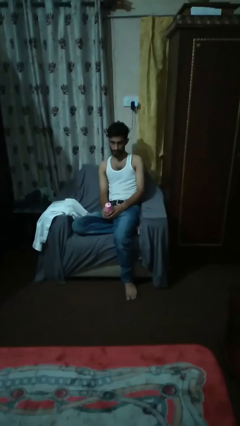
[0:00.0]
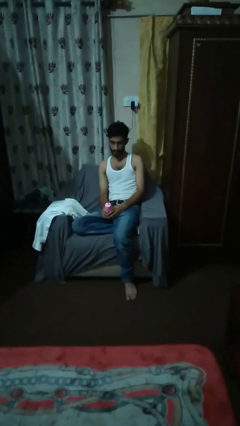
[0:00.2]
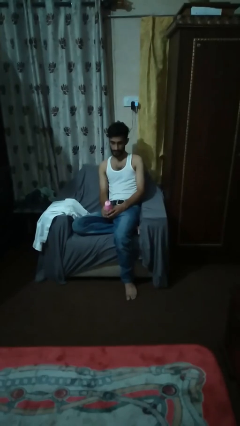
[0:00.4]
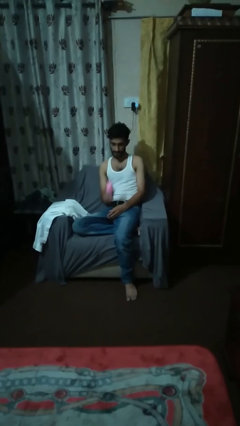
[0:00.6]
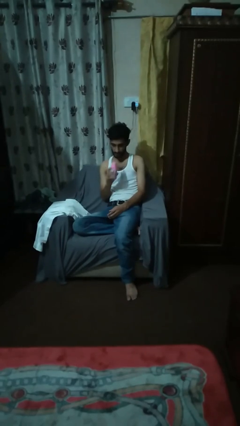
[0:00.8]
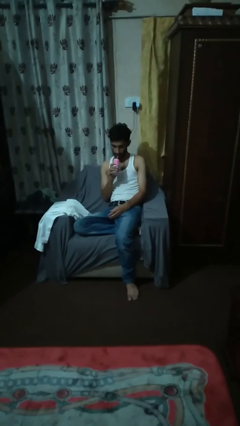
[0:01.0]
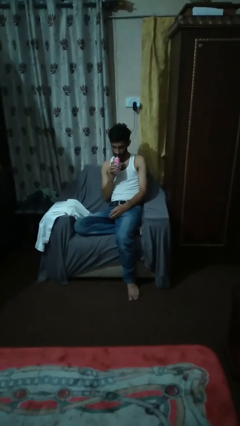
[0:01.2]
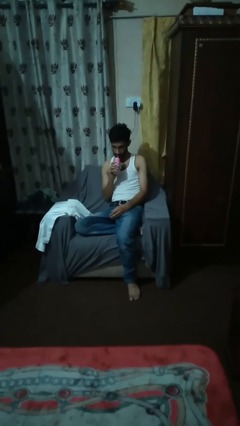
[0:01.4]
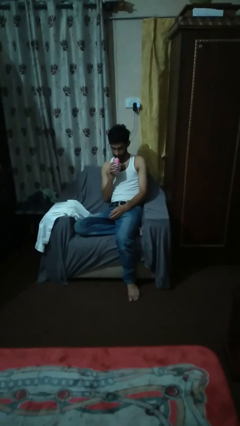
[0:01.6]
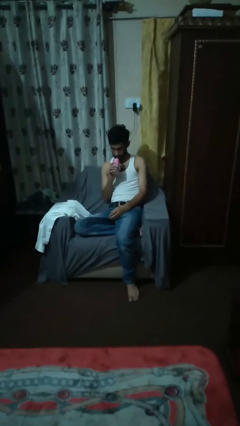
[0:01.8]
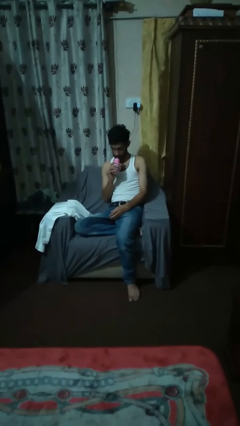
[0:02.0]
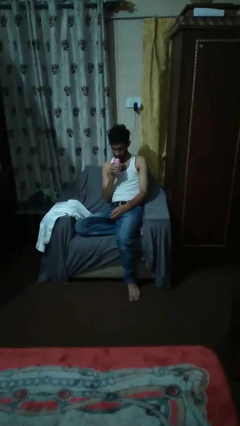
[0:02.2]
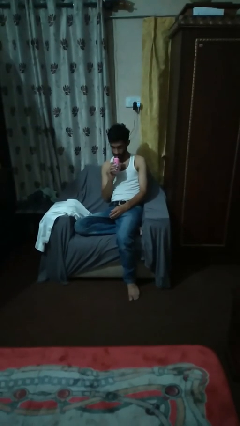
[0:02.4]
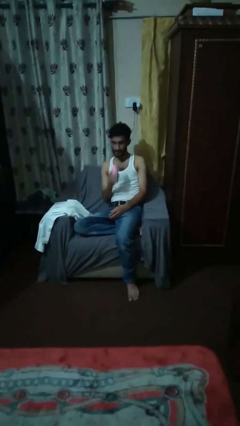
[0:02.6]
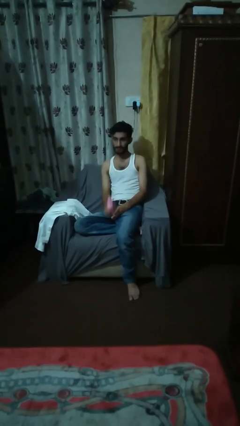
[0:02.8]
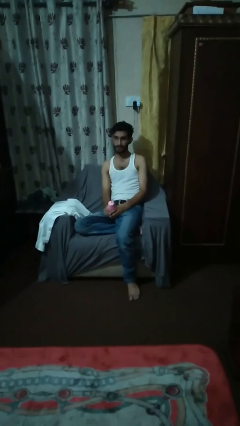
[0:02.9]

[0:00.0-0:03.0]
person drinks from straw

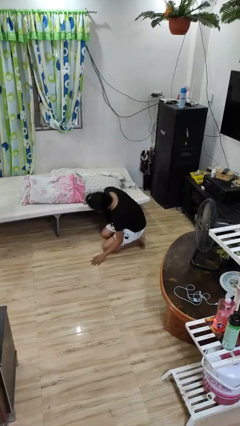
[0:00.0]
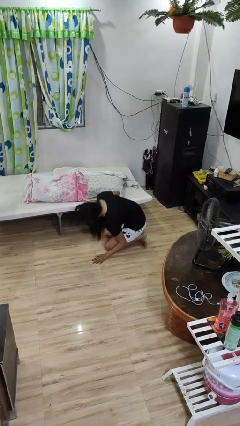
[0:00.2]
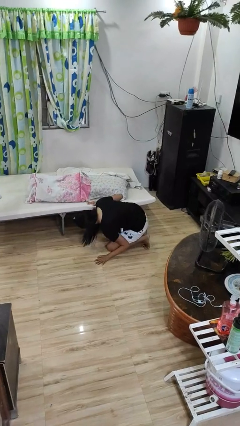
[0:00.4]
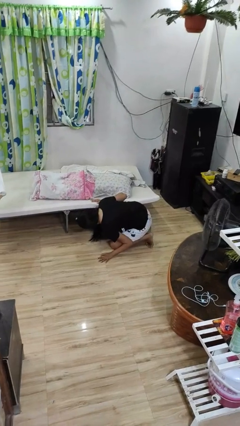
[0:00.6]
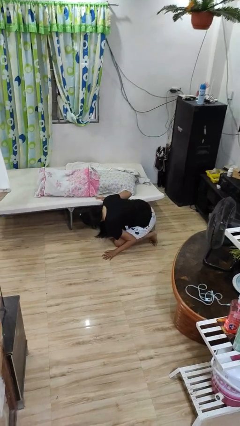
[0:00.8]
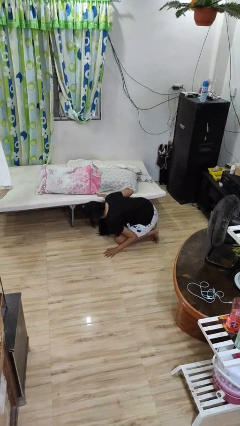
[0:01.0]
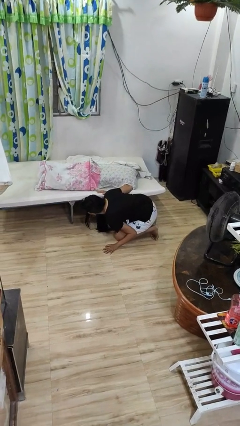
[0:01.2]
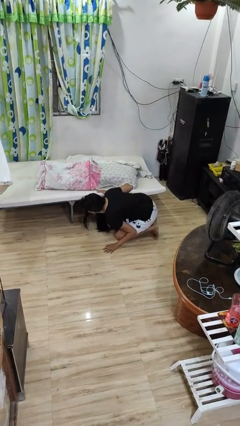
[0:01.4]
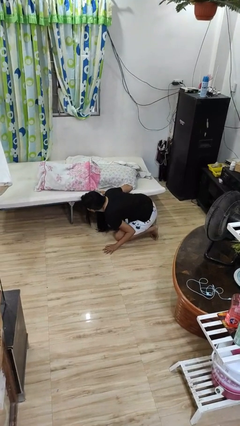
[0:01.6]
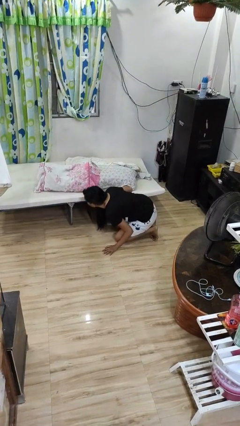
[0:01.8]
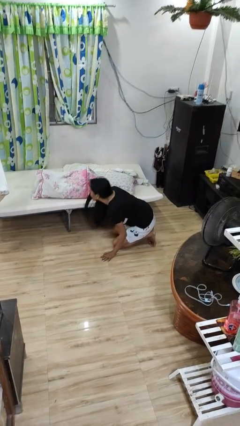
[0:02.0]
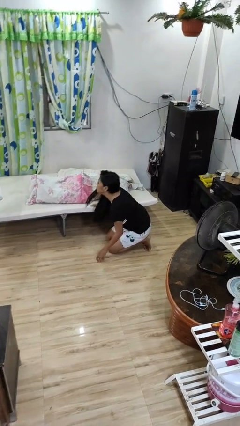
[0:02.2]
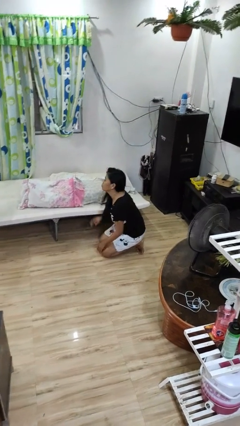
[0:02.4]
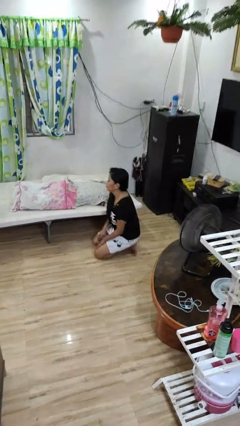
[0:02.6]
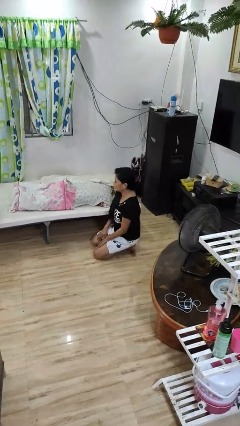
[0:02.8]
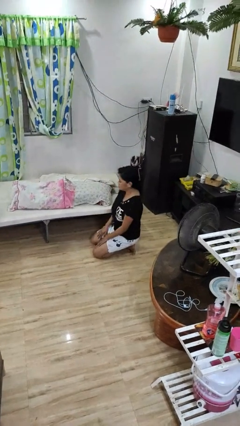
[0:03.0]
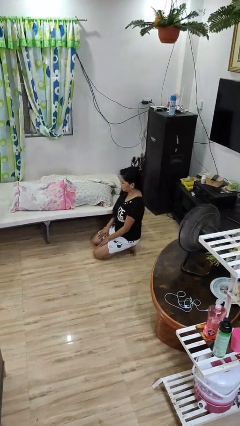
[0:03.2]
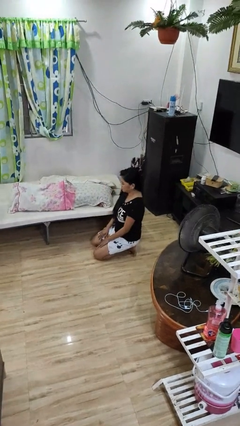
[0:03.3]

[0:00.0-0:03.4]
person searches under bed

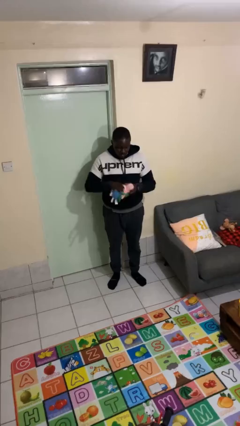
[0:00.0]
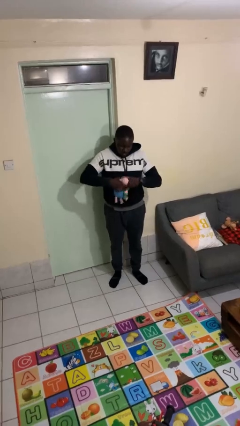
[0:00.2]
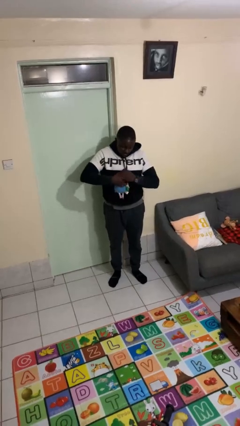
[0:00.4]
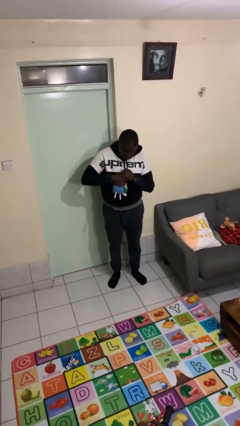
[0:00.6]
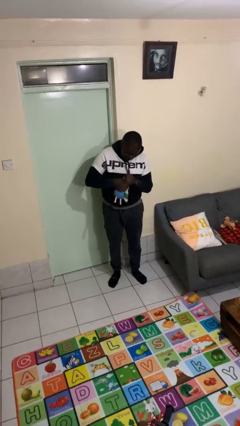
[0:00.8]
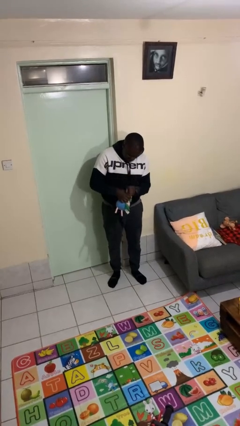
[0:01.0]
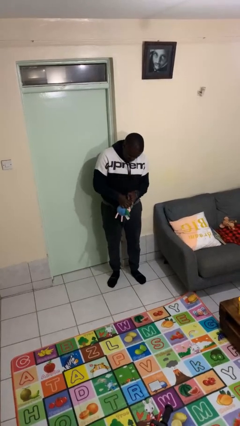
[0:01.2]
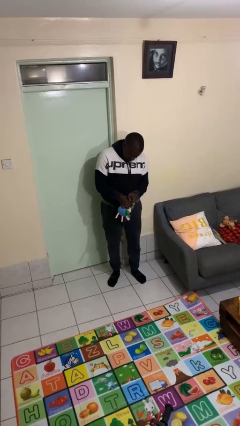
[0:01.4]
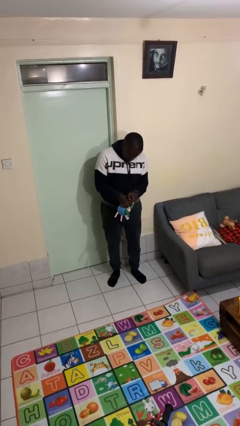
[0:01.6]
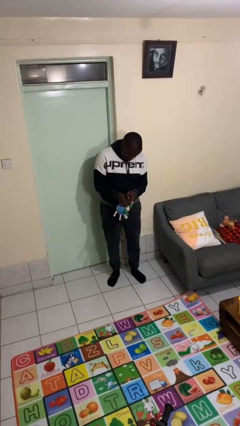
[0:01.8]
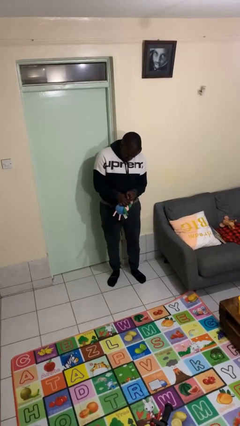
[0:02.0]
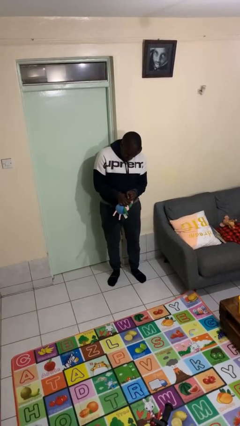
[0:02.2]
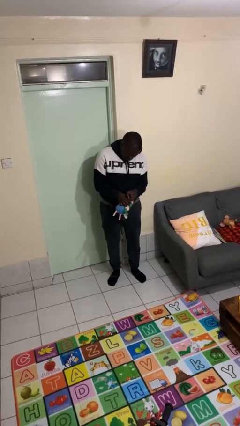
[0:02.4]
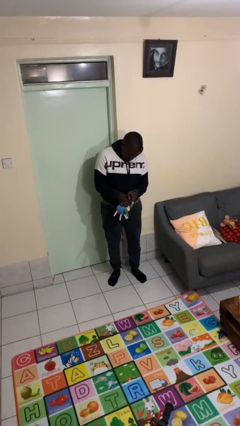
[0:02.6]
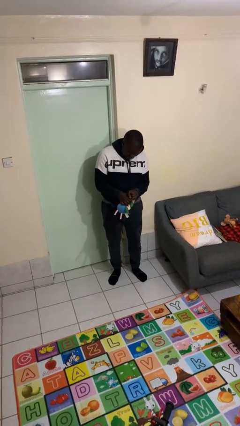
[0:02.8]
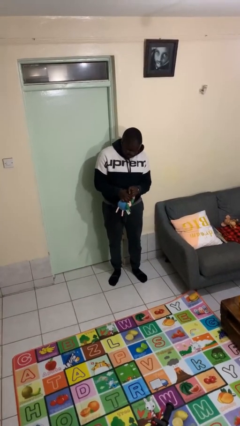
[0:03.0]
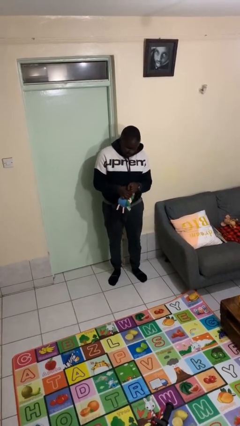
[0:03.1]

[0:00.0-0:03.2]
person squeezes object

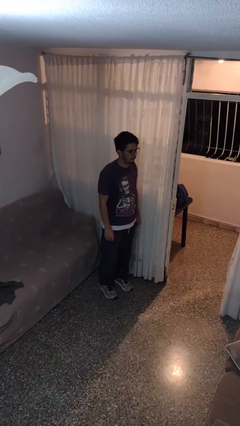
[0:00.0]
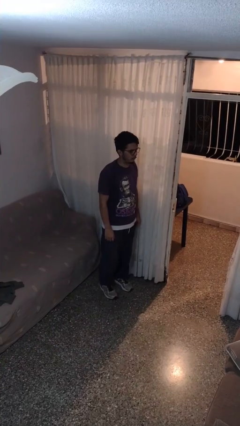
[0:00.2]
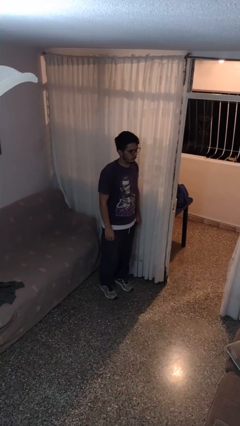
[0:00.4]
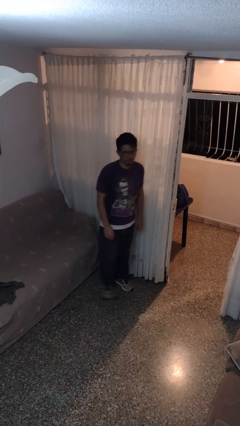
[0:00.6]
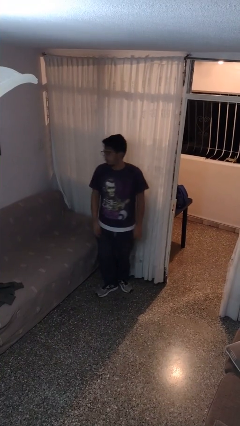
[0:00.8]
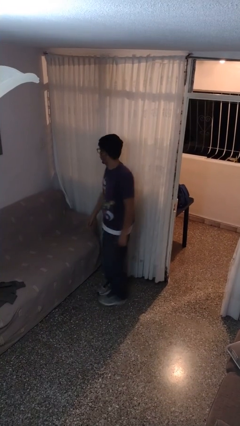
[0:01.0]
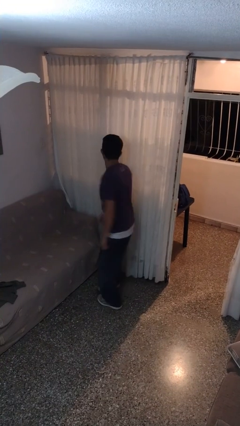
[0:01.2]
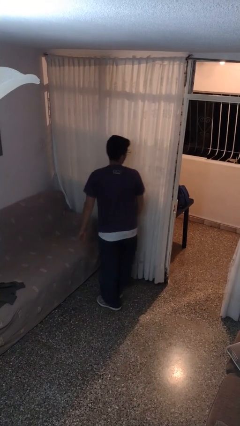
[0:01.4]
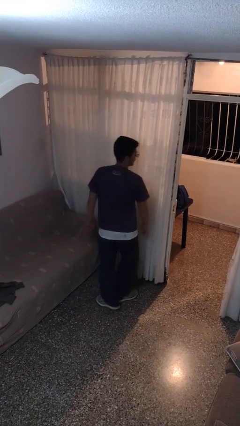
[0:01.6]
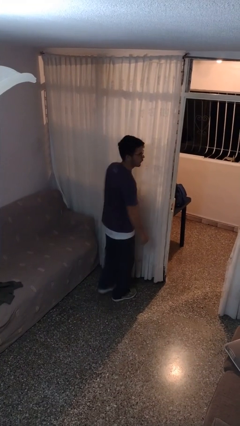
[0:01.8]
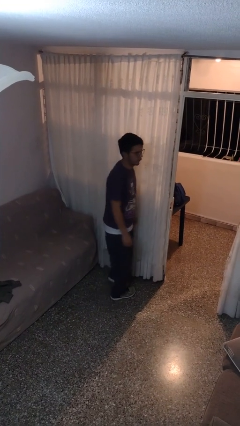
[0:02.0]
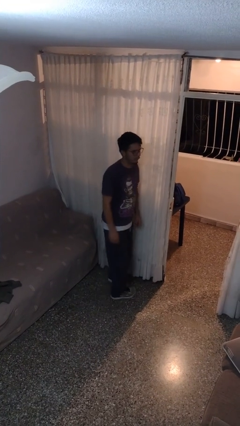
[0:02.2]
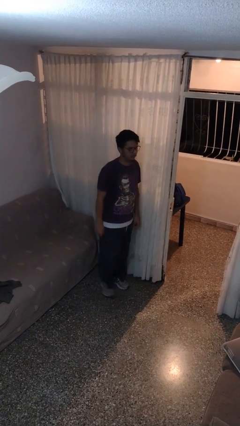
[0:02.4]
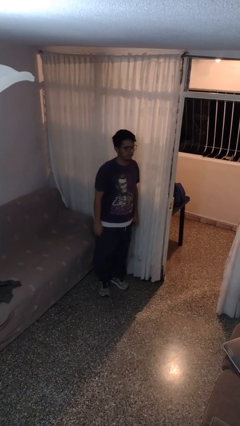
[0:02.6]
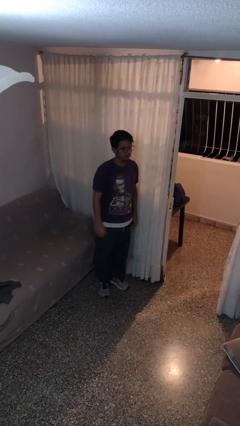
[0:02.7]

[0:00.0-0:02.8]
person twirls

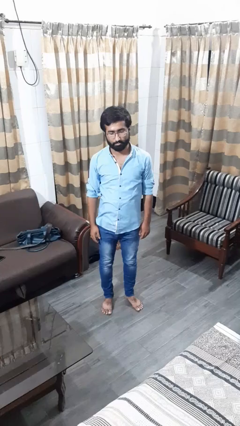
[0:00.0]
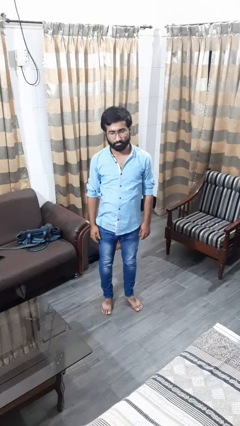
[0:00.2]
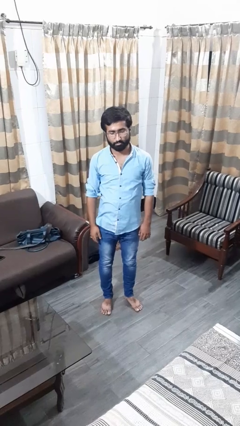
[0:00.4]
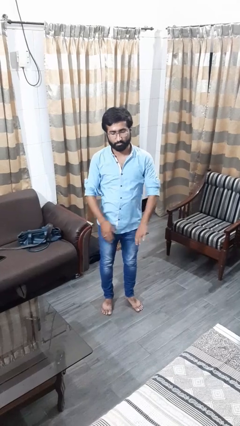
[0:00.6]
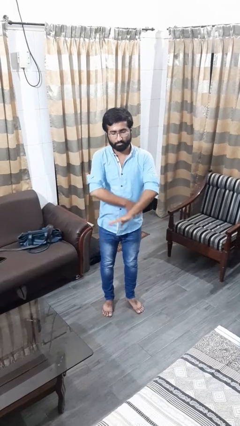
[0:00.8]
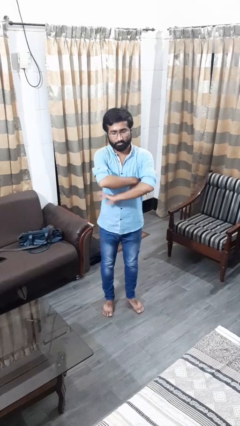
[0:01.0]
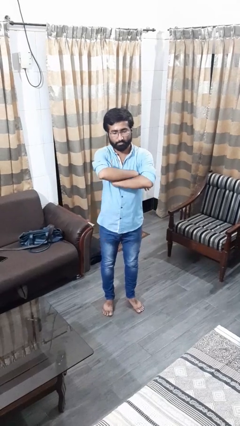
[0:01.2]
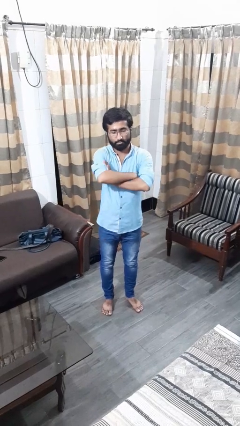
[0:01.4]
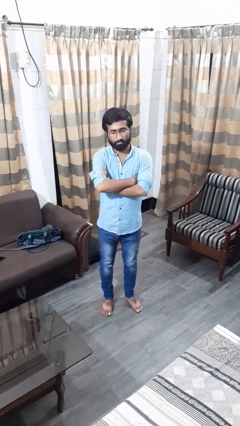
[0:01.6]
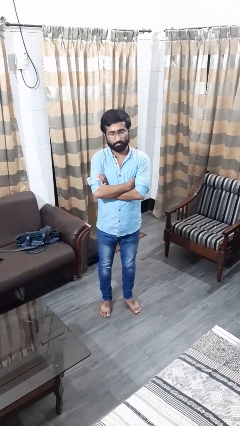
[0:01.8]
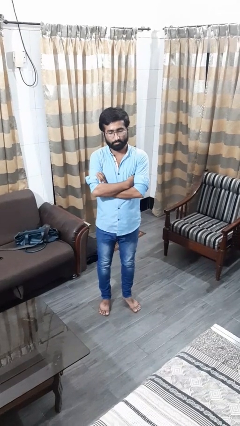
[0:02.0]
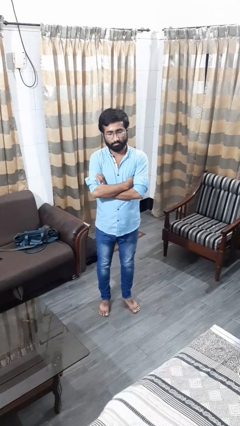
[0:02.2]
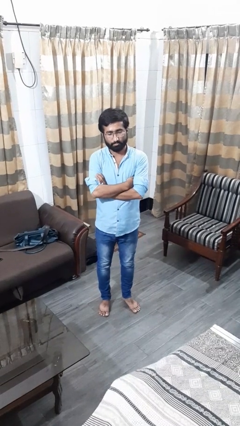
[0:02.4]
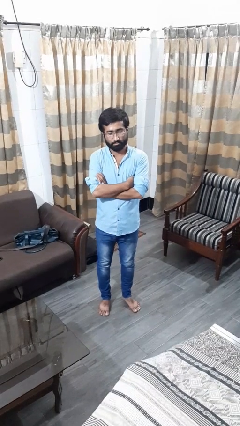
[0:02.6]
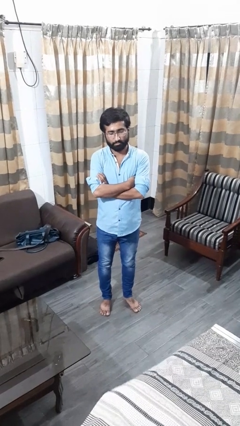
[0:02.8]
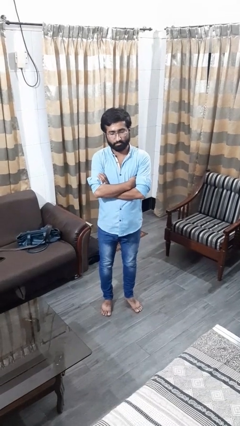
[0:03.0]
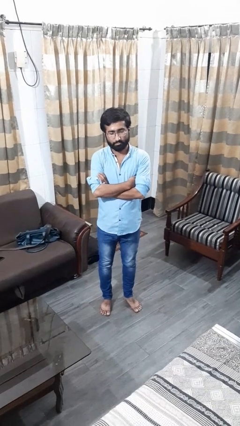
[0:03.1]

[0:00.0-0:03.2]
person crosses arms

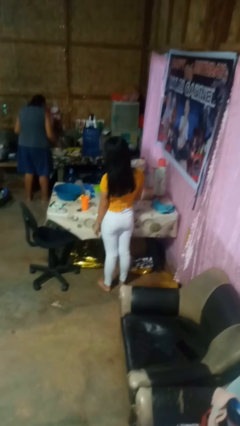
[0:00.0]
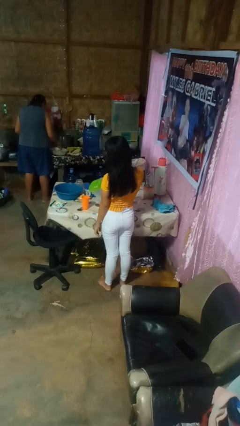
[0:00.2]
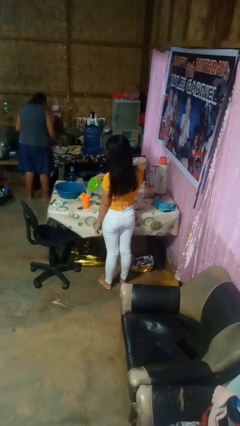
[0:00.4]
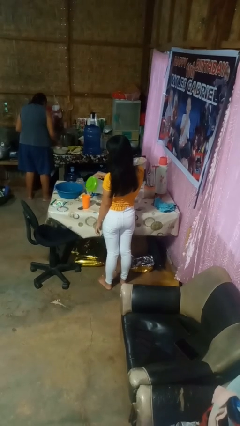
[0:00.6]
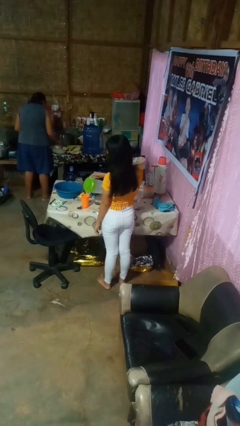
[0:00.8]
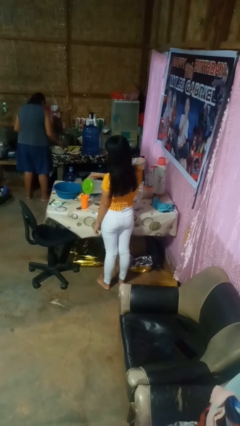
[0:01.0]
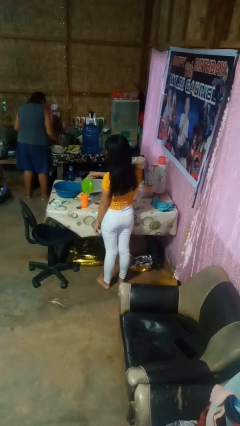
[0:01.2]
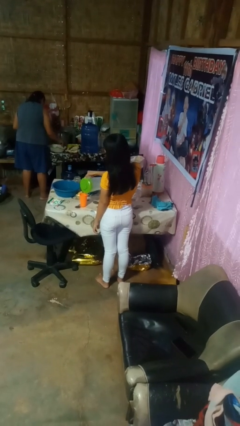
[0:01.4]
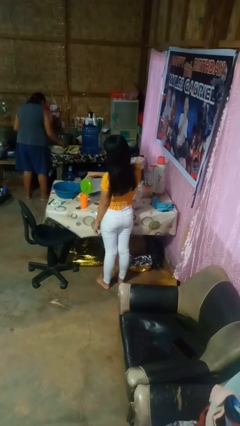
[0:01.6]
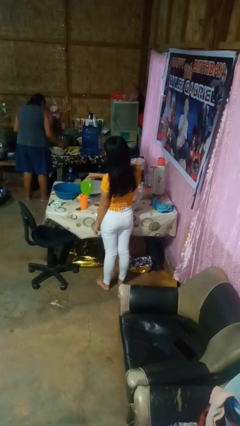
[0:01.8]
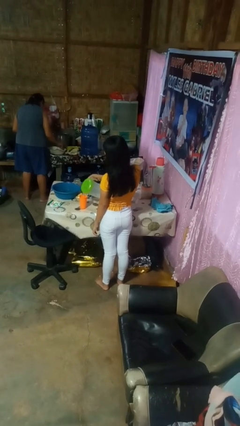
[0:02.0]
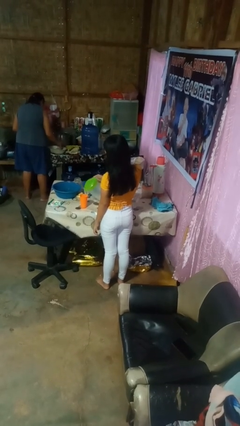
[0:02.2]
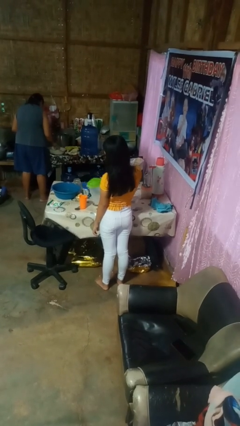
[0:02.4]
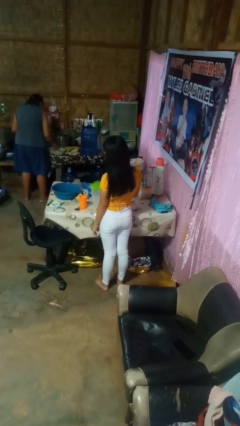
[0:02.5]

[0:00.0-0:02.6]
person pours liquid into cup
